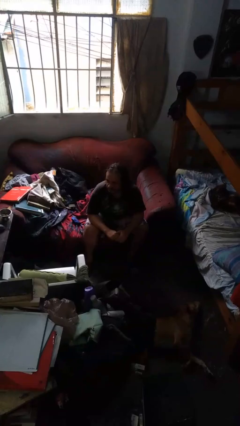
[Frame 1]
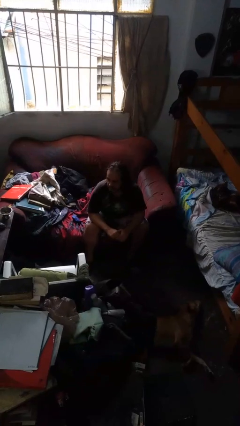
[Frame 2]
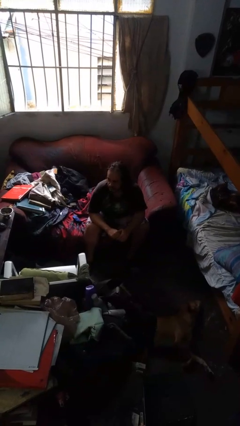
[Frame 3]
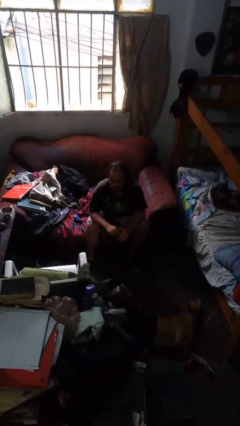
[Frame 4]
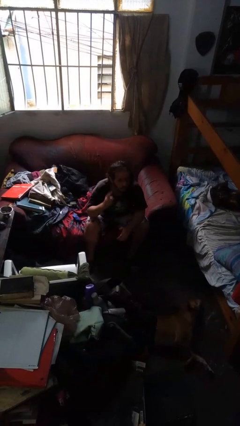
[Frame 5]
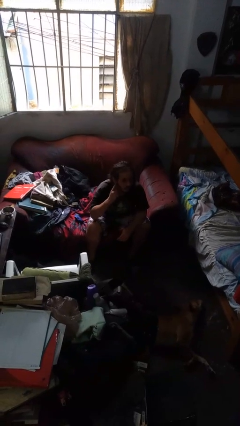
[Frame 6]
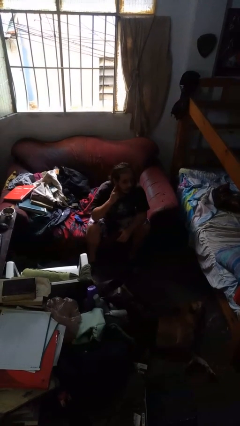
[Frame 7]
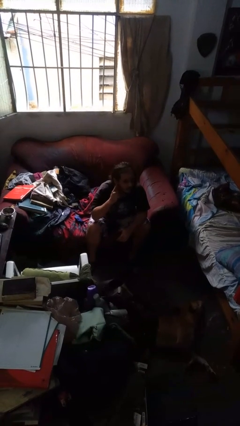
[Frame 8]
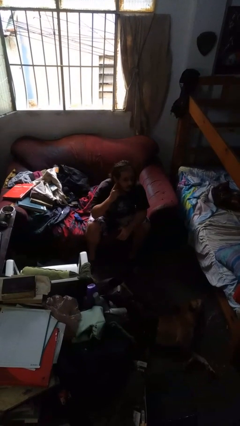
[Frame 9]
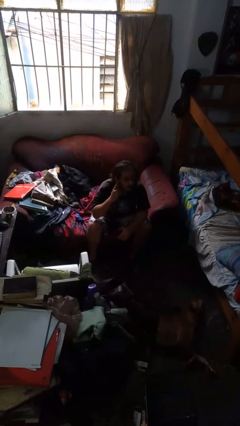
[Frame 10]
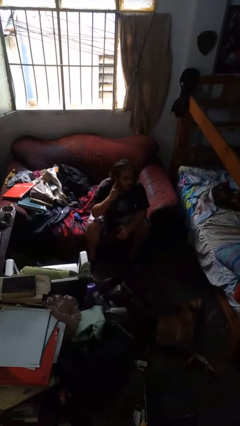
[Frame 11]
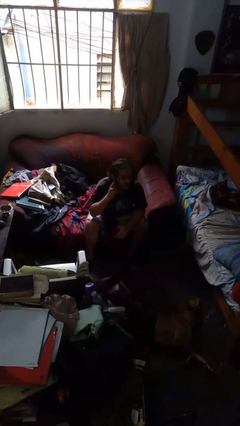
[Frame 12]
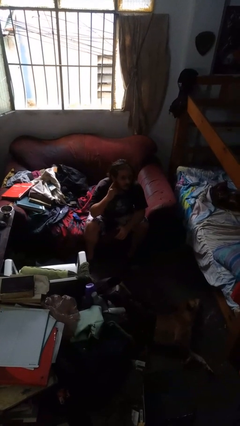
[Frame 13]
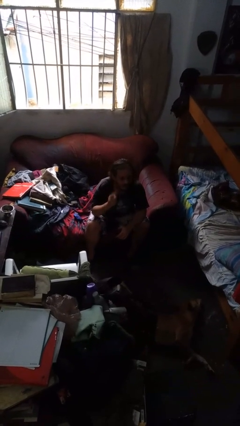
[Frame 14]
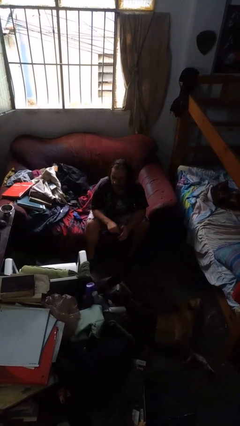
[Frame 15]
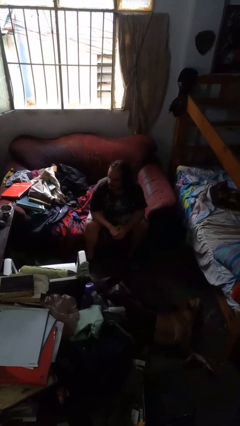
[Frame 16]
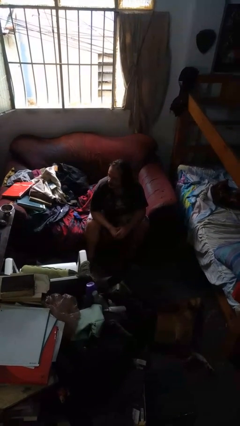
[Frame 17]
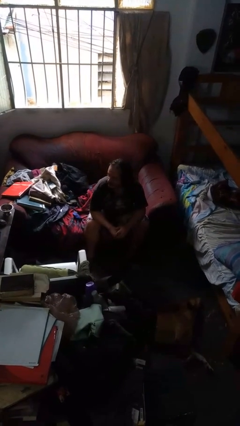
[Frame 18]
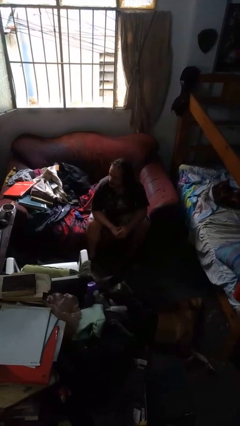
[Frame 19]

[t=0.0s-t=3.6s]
person gestures listen closely

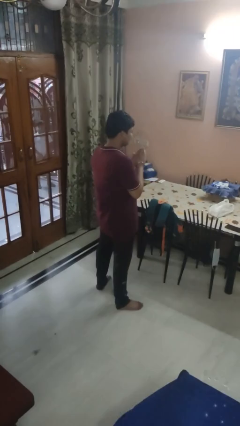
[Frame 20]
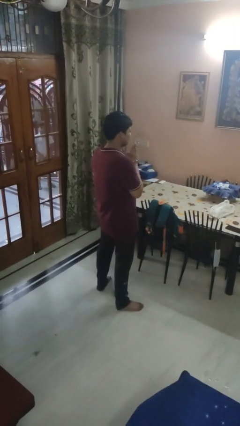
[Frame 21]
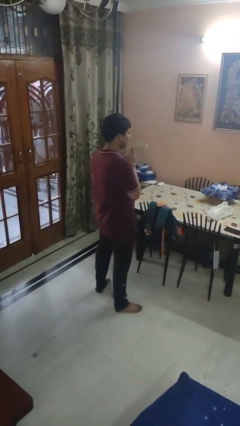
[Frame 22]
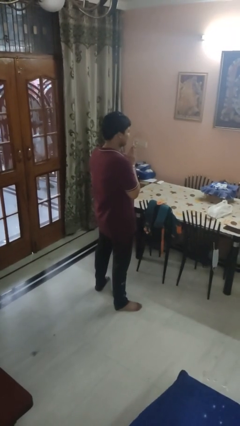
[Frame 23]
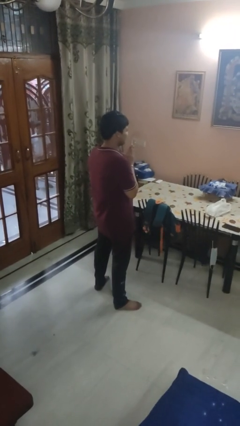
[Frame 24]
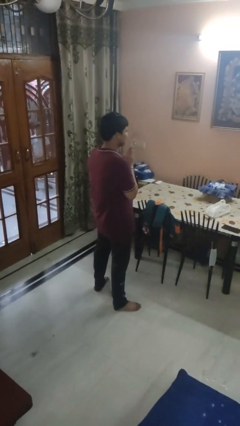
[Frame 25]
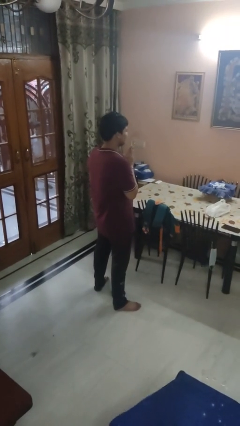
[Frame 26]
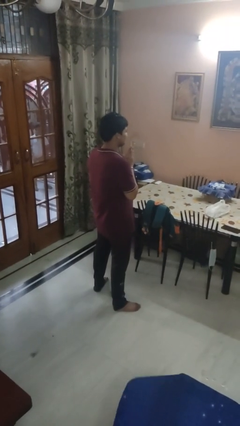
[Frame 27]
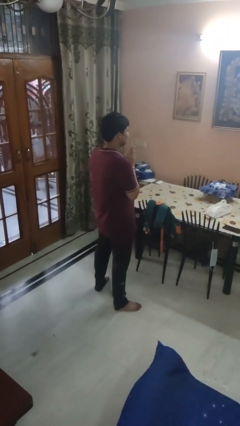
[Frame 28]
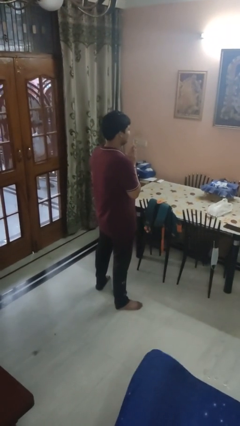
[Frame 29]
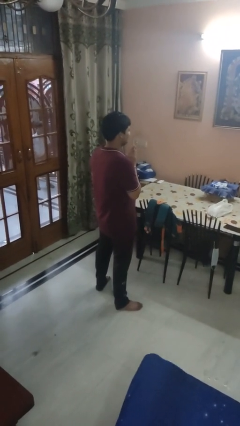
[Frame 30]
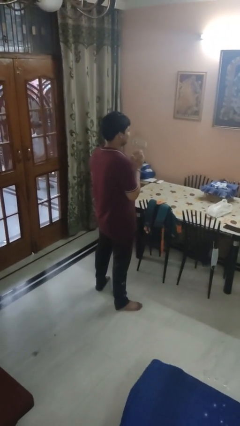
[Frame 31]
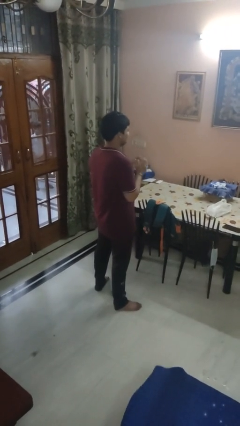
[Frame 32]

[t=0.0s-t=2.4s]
person prays

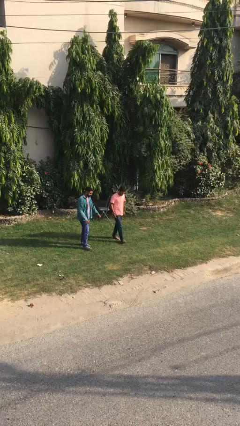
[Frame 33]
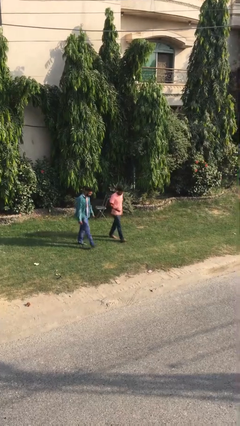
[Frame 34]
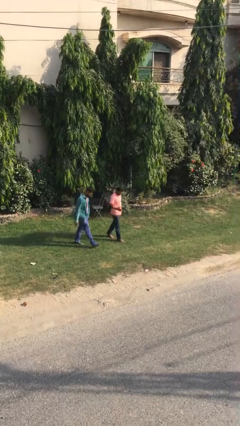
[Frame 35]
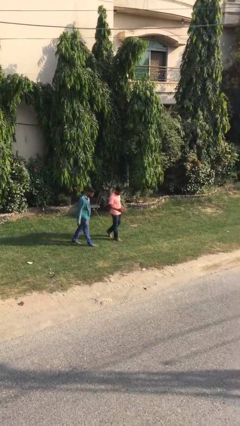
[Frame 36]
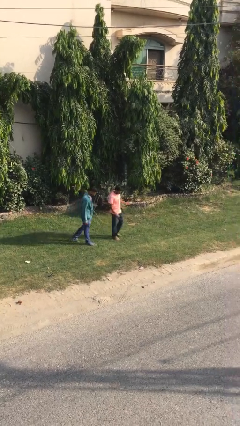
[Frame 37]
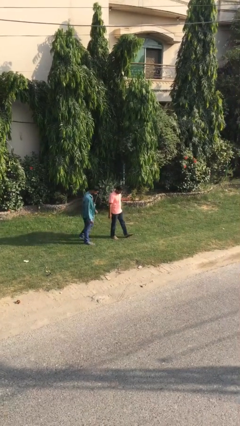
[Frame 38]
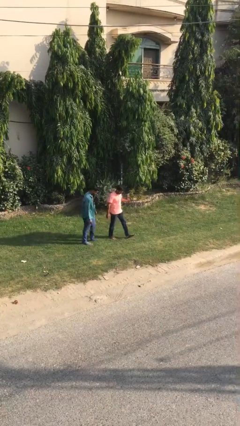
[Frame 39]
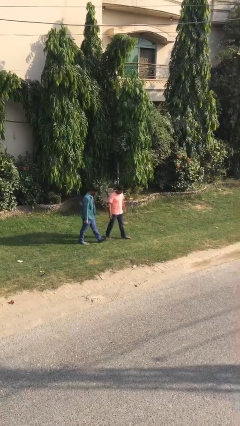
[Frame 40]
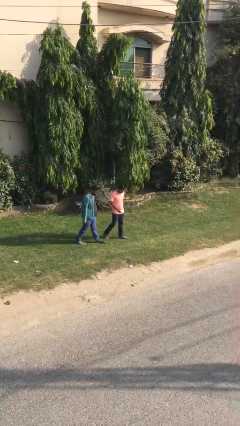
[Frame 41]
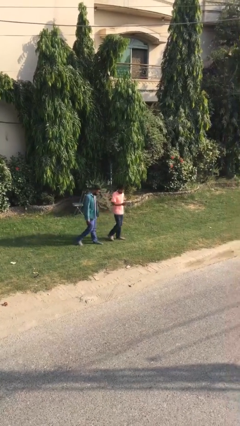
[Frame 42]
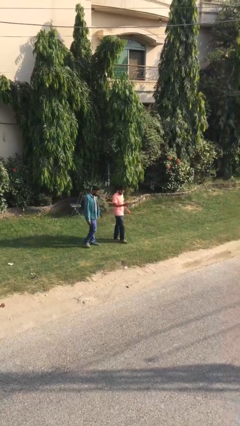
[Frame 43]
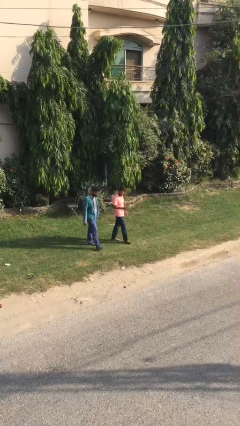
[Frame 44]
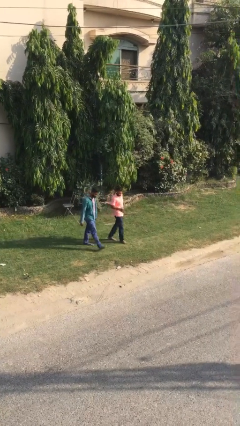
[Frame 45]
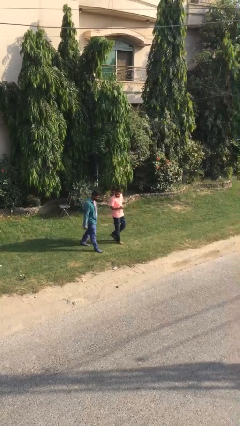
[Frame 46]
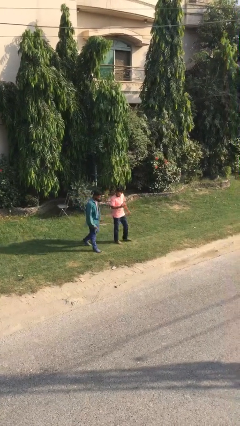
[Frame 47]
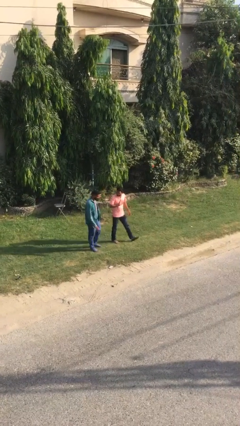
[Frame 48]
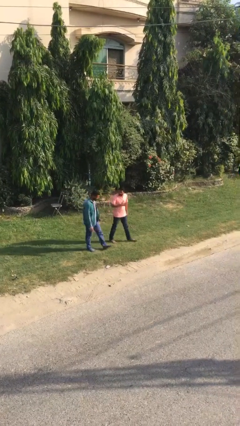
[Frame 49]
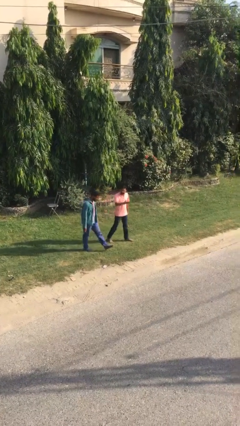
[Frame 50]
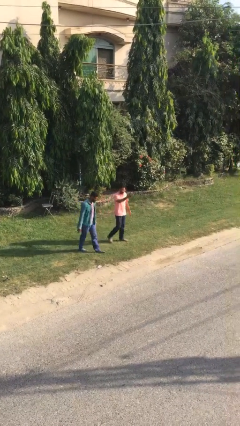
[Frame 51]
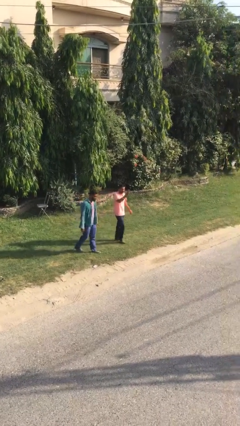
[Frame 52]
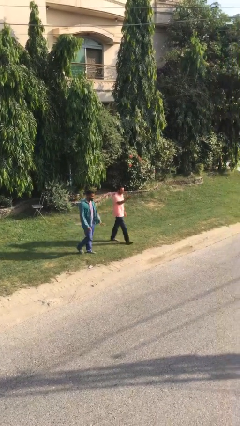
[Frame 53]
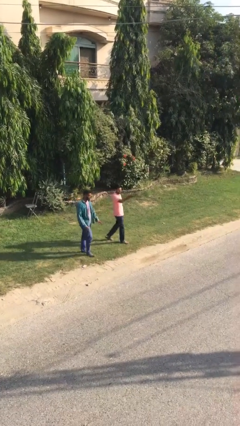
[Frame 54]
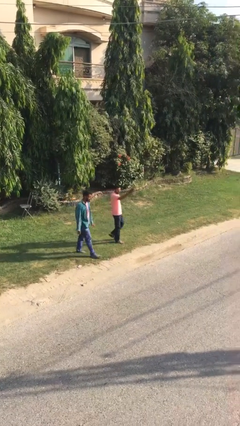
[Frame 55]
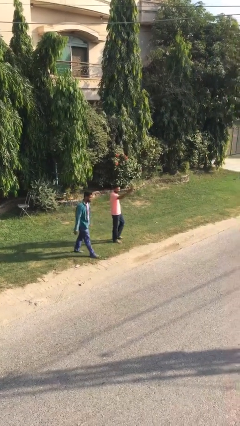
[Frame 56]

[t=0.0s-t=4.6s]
person talks to person

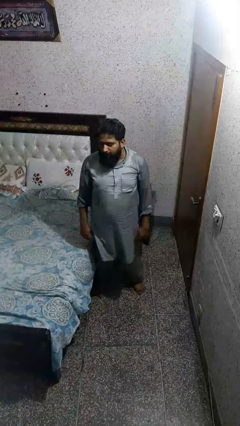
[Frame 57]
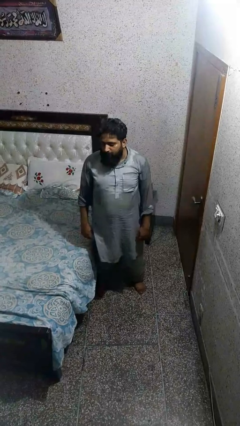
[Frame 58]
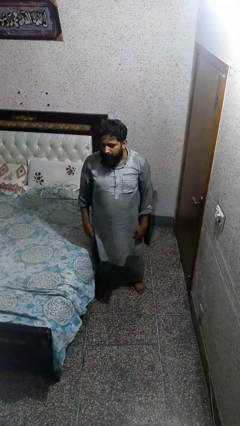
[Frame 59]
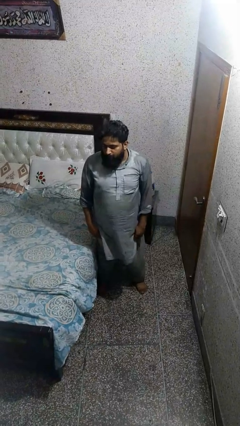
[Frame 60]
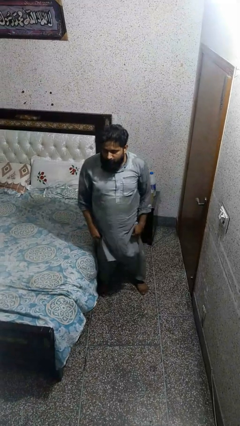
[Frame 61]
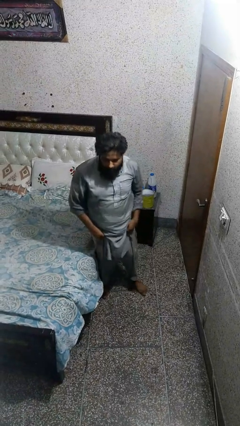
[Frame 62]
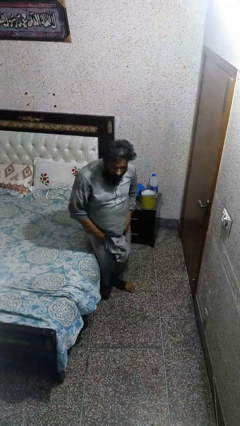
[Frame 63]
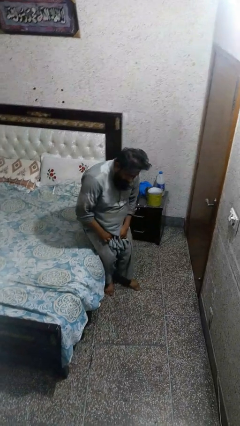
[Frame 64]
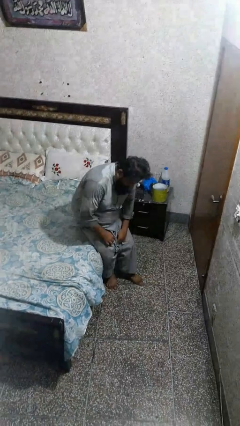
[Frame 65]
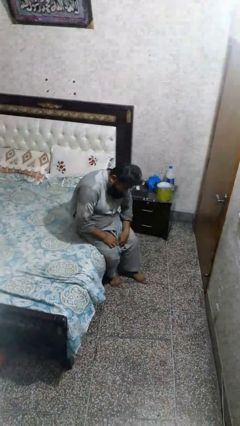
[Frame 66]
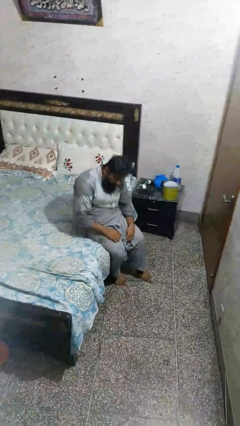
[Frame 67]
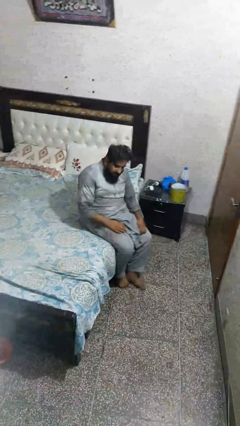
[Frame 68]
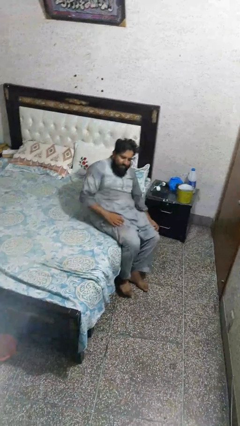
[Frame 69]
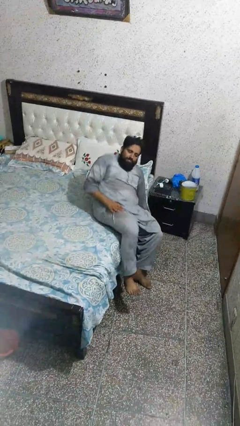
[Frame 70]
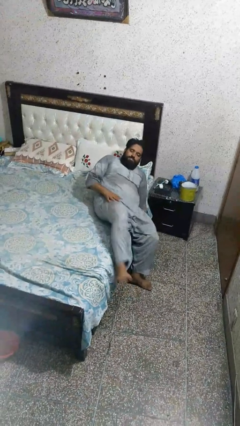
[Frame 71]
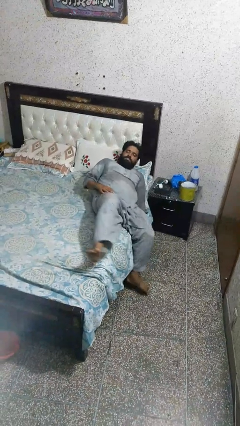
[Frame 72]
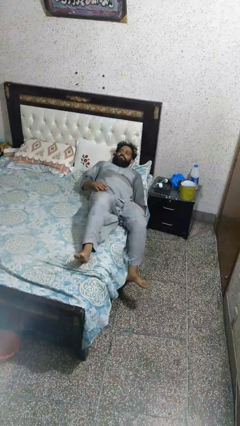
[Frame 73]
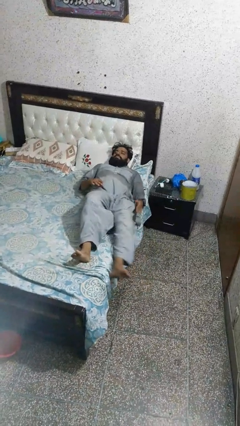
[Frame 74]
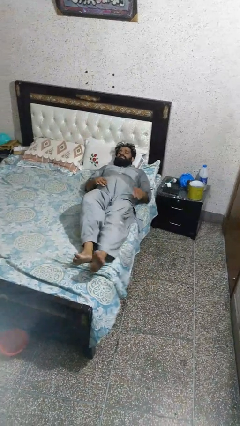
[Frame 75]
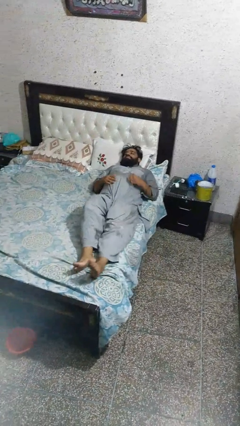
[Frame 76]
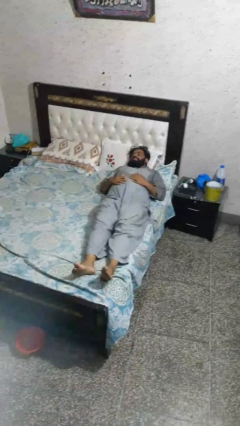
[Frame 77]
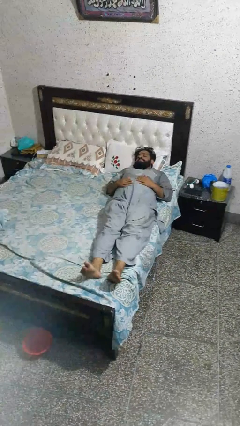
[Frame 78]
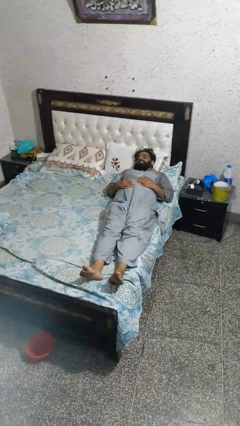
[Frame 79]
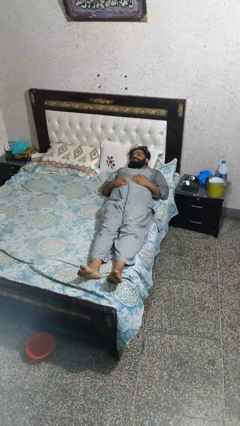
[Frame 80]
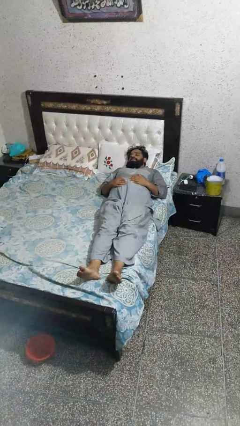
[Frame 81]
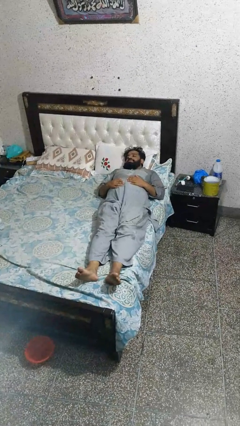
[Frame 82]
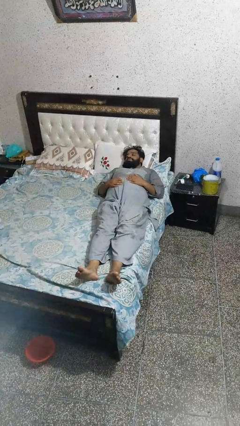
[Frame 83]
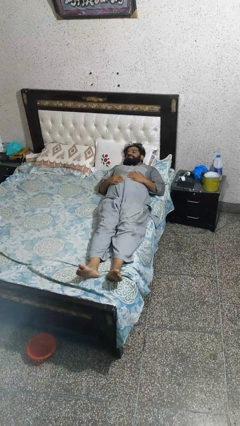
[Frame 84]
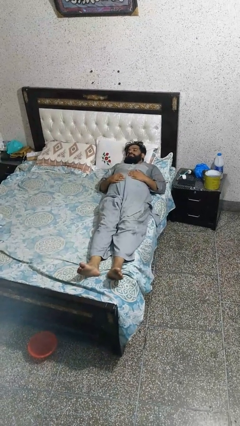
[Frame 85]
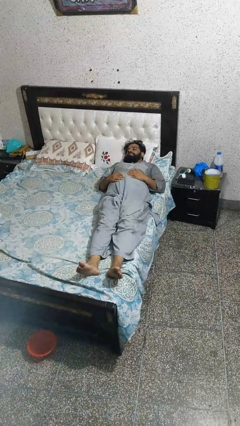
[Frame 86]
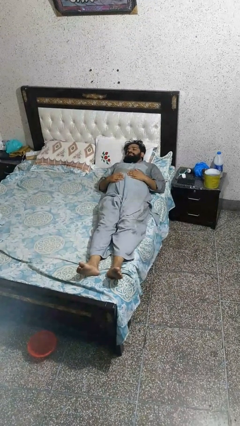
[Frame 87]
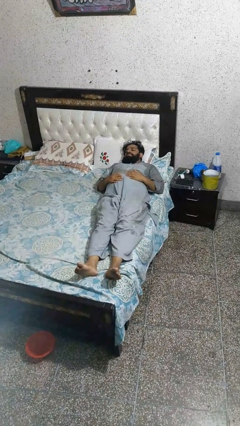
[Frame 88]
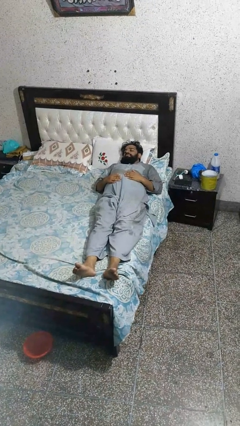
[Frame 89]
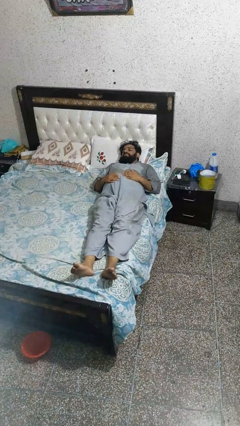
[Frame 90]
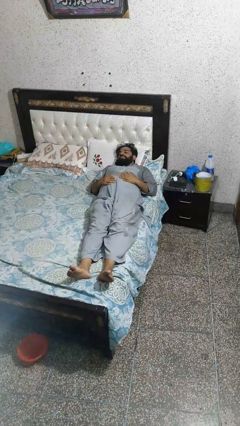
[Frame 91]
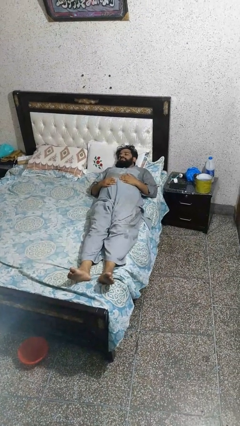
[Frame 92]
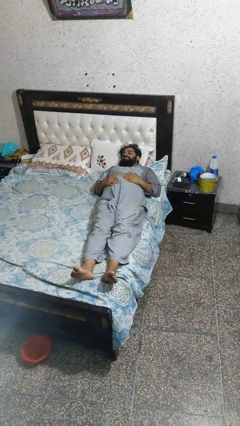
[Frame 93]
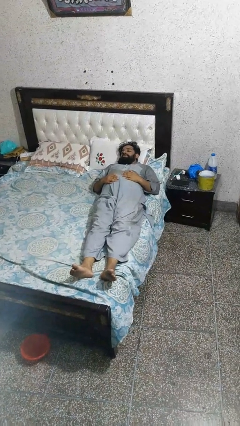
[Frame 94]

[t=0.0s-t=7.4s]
person lies down on bed
